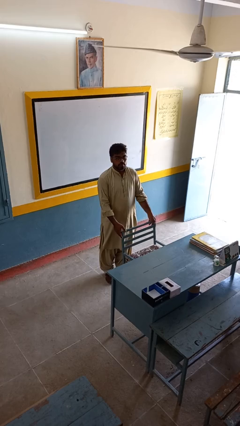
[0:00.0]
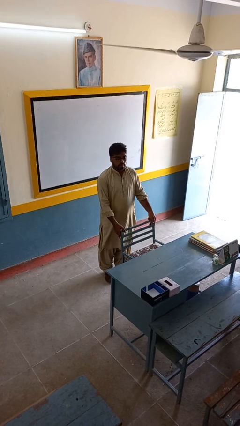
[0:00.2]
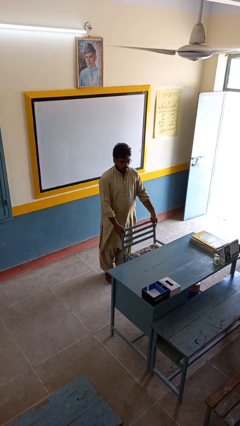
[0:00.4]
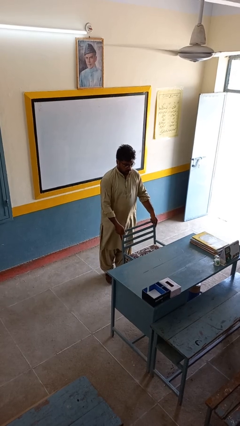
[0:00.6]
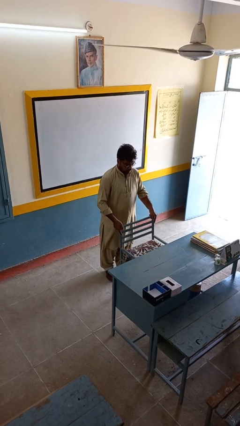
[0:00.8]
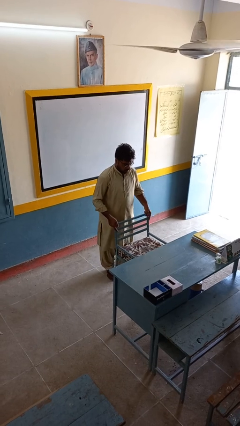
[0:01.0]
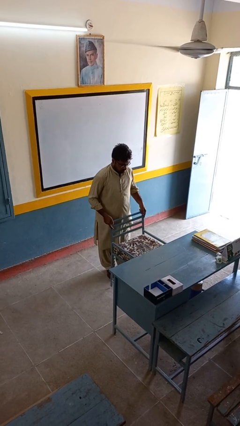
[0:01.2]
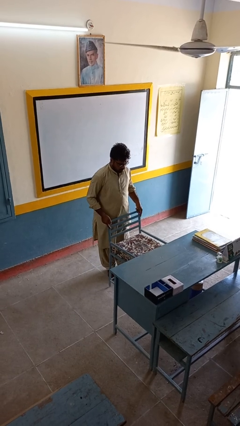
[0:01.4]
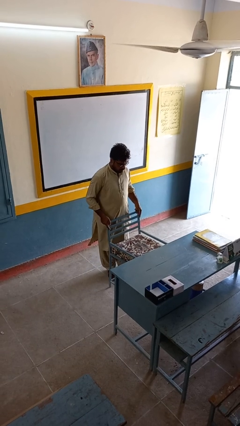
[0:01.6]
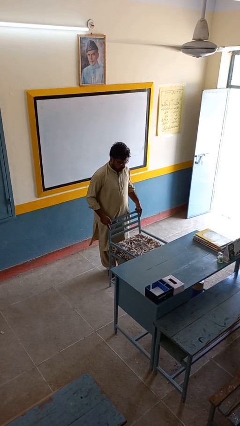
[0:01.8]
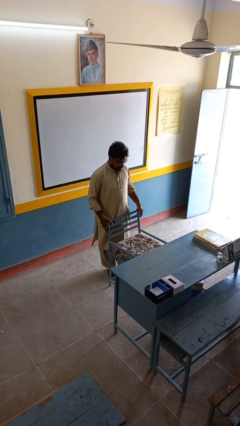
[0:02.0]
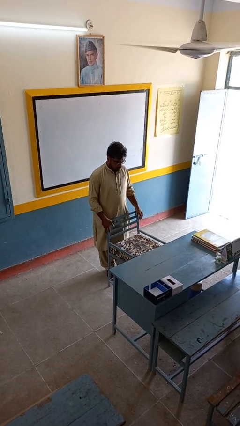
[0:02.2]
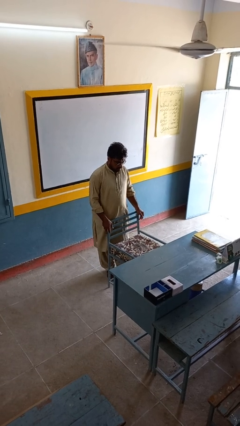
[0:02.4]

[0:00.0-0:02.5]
person pulls out chair

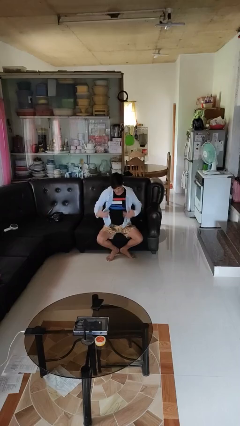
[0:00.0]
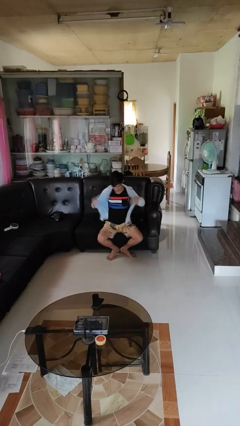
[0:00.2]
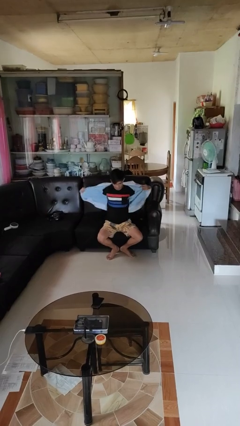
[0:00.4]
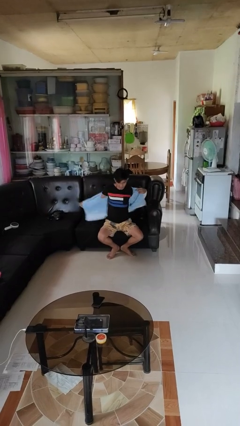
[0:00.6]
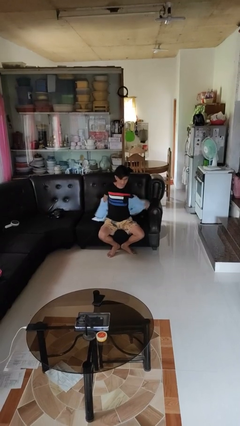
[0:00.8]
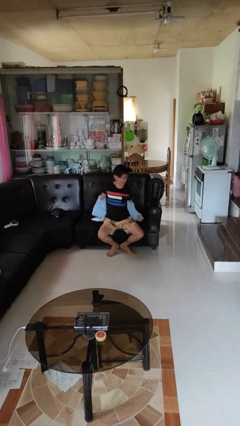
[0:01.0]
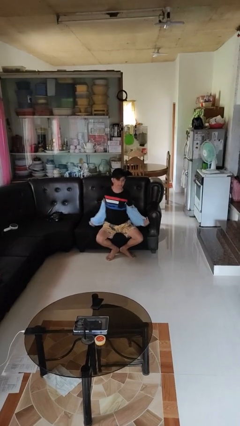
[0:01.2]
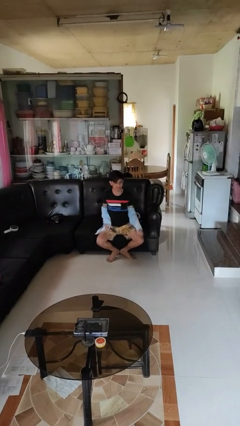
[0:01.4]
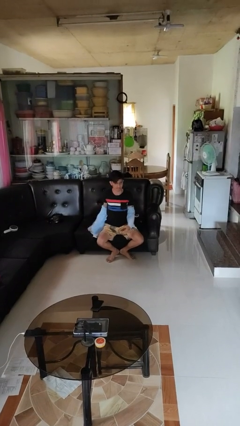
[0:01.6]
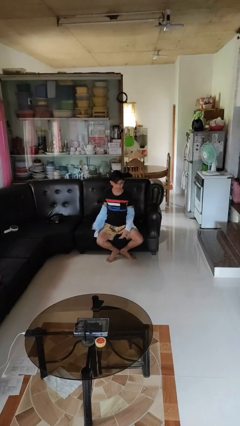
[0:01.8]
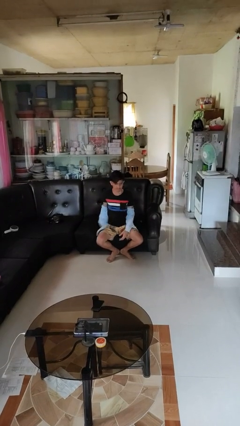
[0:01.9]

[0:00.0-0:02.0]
person takes off jacket

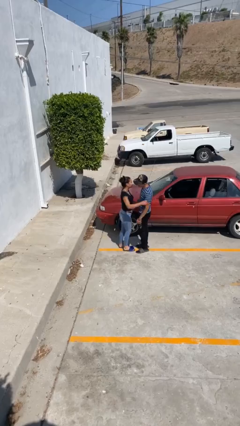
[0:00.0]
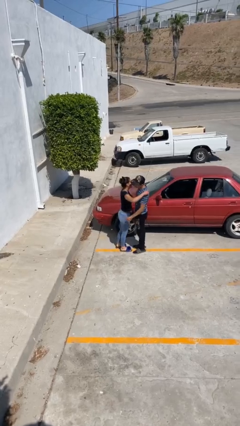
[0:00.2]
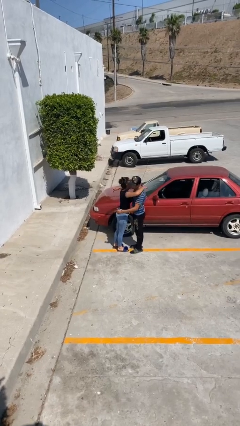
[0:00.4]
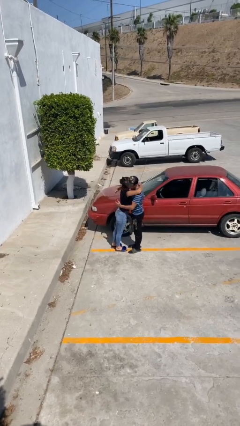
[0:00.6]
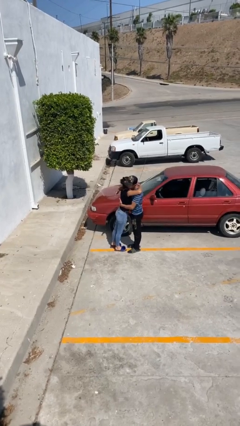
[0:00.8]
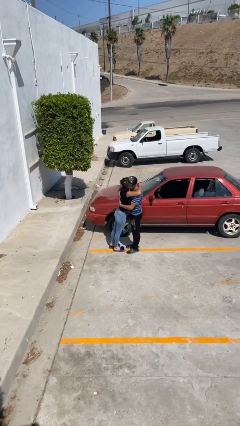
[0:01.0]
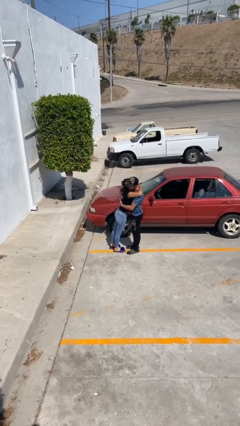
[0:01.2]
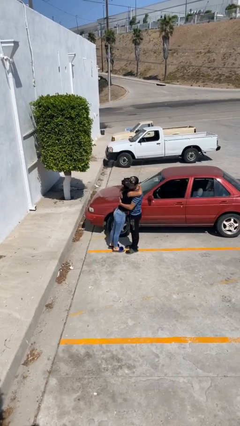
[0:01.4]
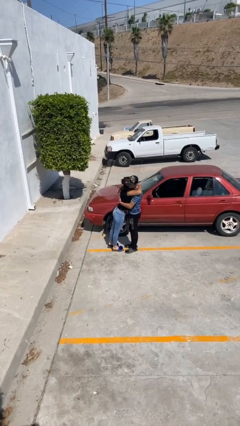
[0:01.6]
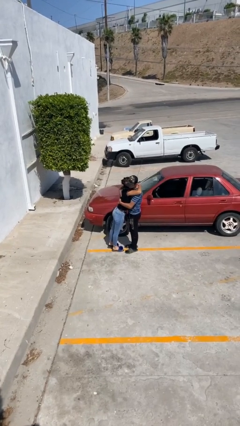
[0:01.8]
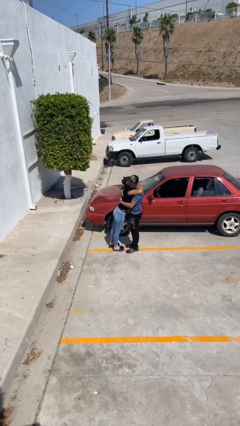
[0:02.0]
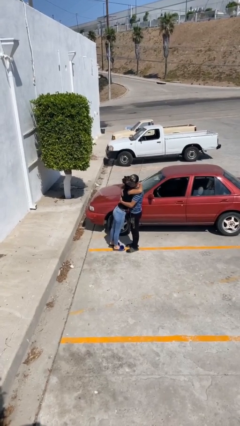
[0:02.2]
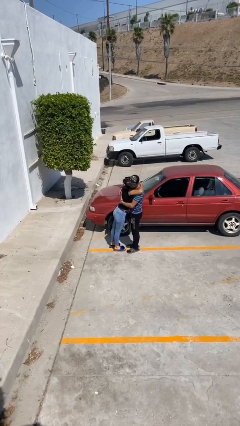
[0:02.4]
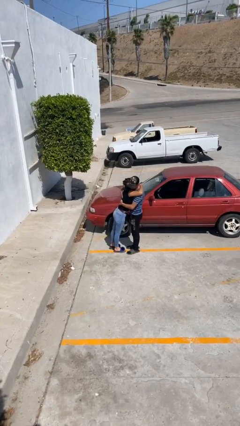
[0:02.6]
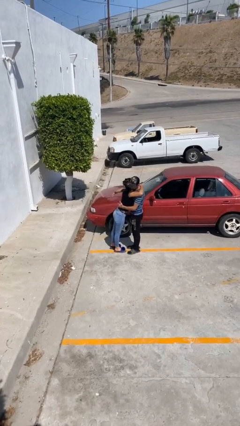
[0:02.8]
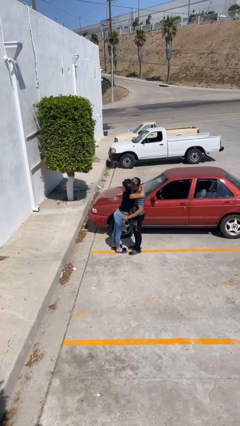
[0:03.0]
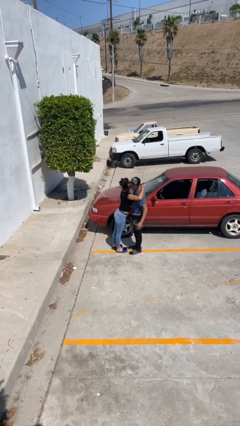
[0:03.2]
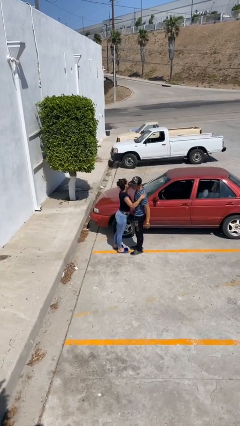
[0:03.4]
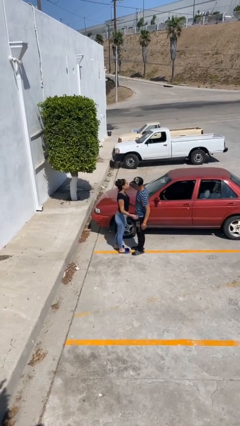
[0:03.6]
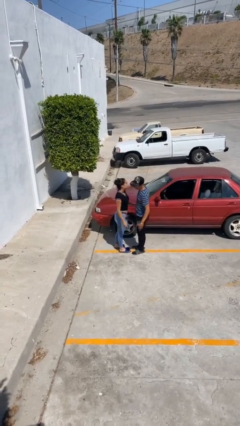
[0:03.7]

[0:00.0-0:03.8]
person embraces person

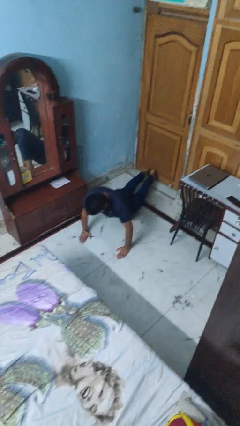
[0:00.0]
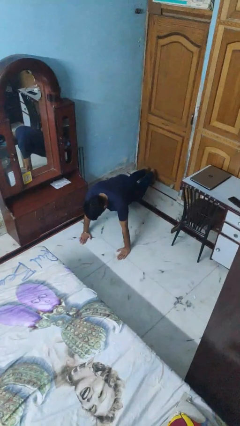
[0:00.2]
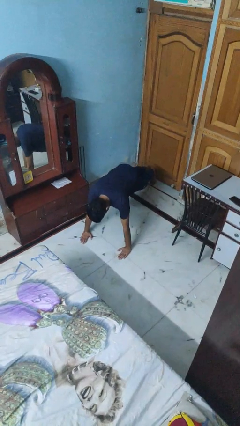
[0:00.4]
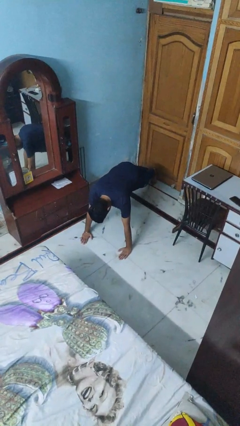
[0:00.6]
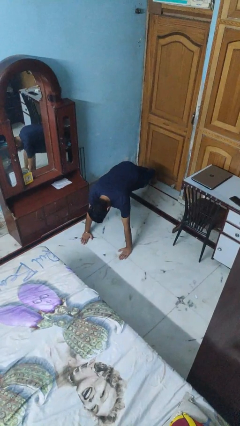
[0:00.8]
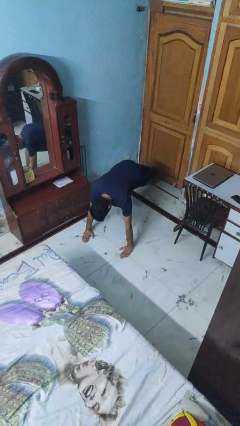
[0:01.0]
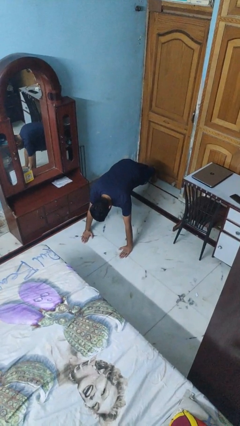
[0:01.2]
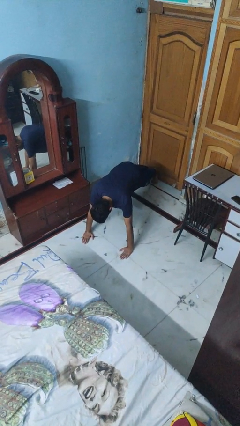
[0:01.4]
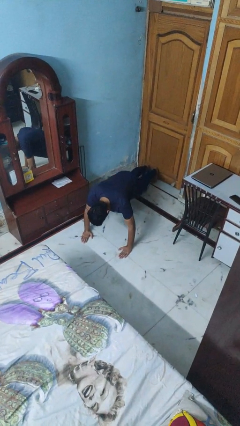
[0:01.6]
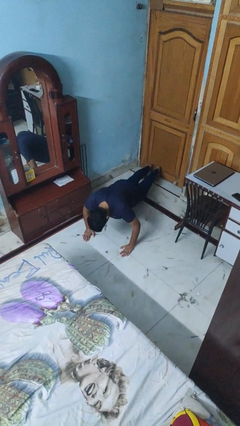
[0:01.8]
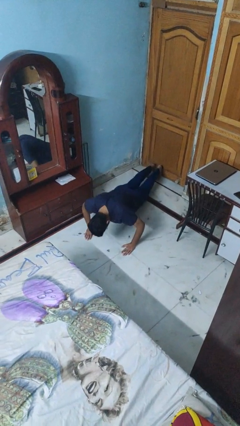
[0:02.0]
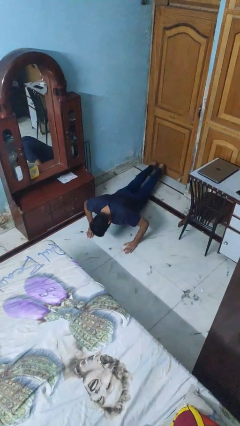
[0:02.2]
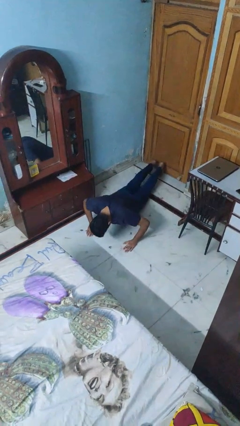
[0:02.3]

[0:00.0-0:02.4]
person exercises with pushup

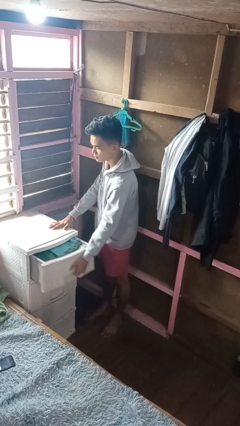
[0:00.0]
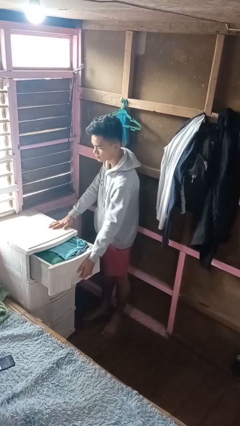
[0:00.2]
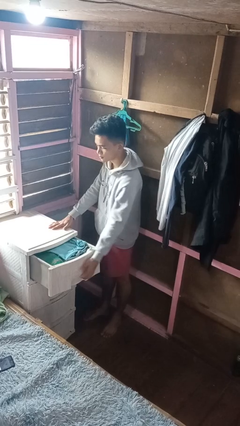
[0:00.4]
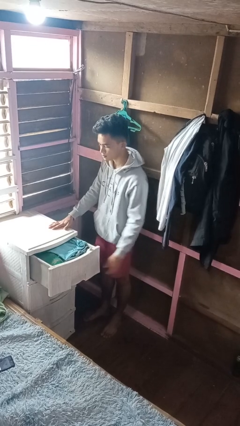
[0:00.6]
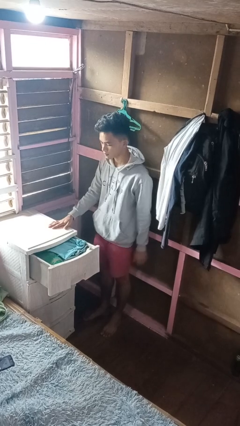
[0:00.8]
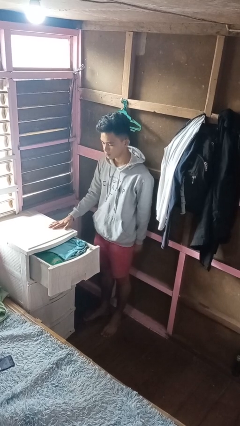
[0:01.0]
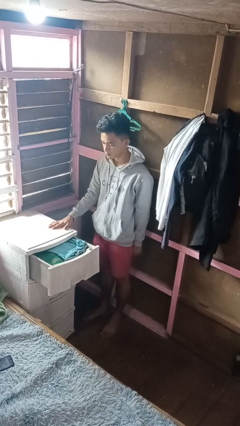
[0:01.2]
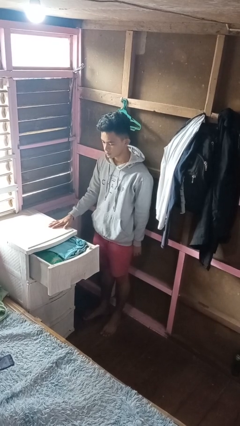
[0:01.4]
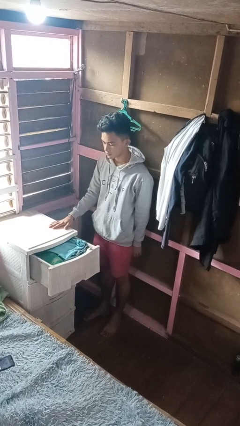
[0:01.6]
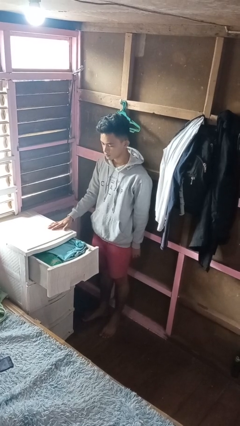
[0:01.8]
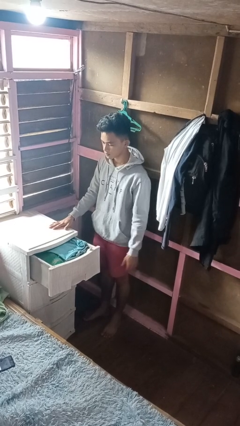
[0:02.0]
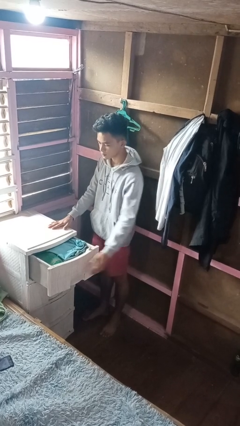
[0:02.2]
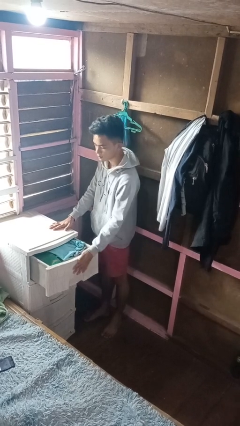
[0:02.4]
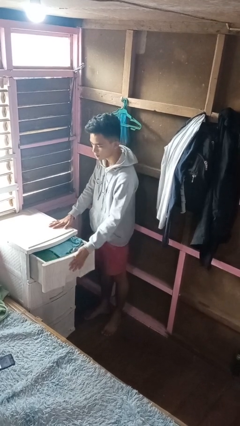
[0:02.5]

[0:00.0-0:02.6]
person opens dresser drawer

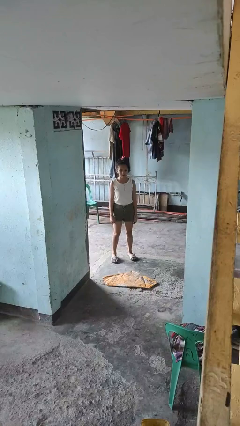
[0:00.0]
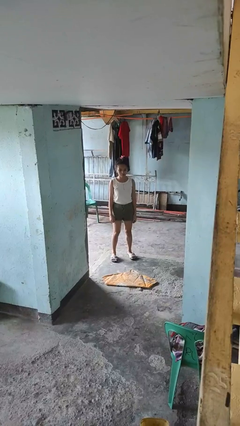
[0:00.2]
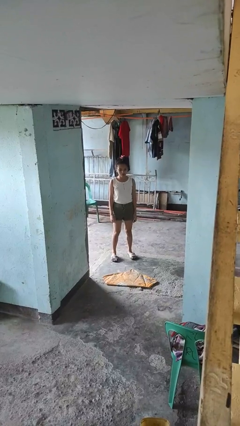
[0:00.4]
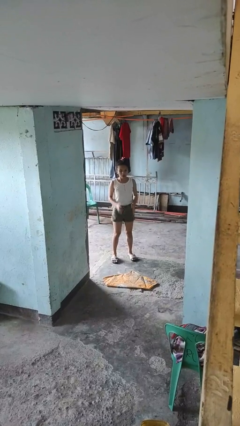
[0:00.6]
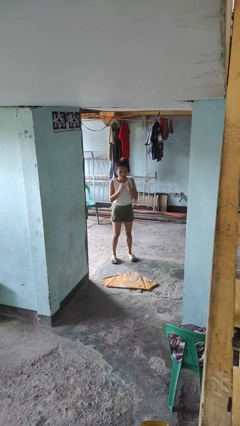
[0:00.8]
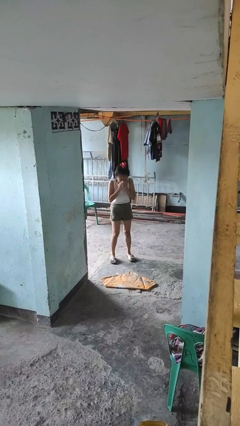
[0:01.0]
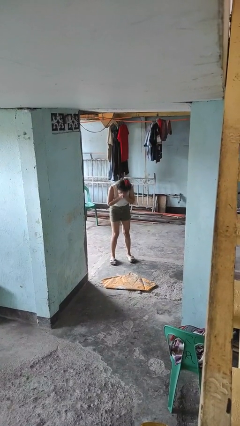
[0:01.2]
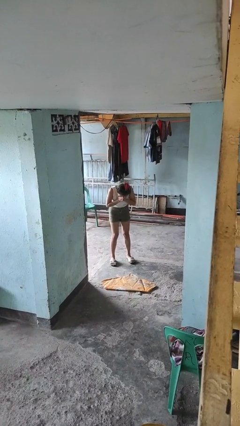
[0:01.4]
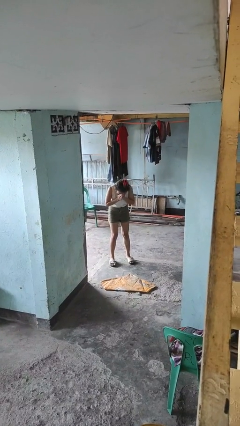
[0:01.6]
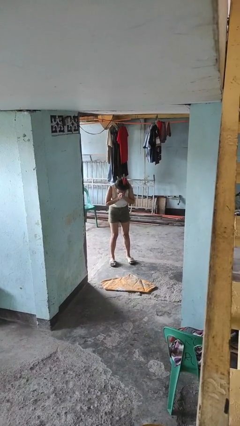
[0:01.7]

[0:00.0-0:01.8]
person sneezes into hand

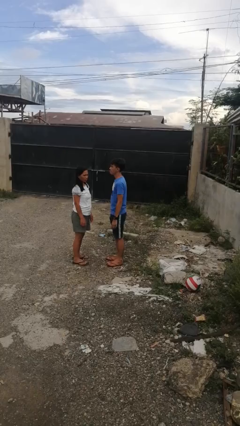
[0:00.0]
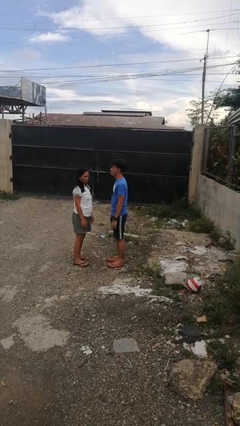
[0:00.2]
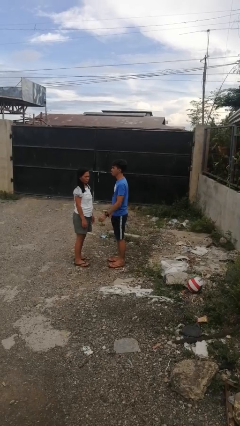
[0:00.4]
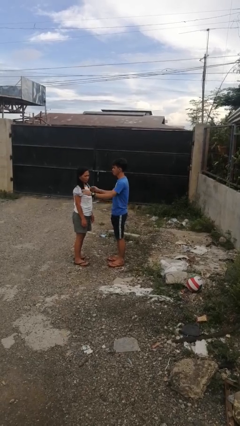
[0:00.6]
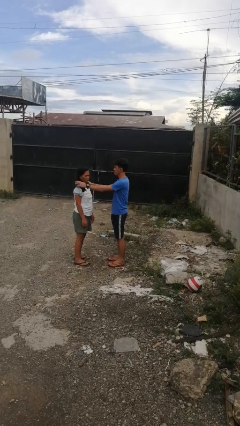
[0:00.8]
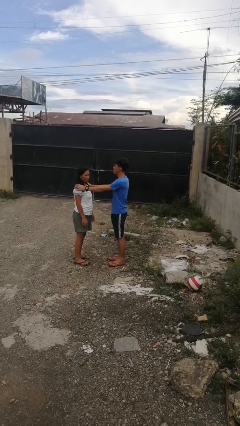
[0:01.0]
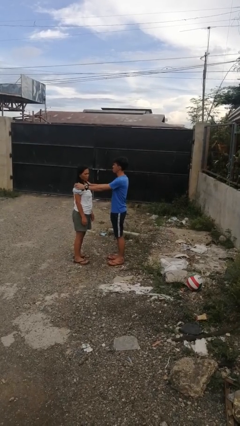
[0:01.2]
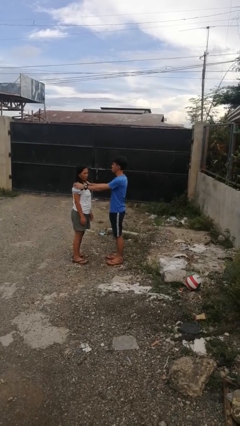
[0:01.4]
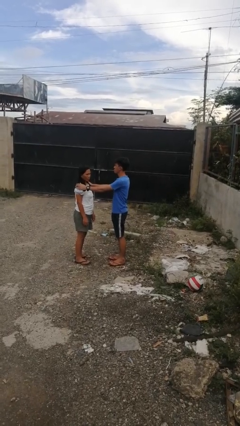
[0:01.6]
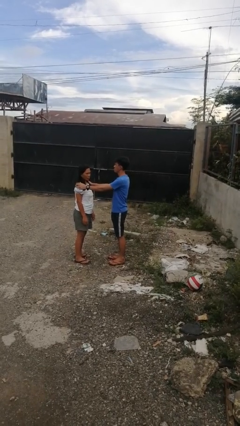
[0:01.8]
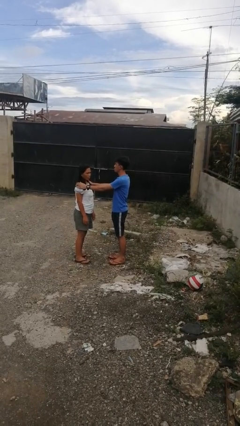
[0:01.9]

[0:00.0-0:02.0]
person grabs person by shoulder
